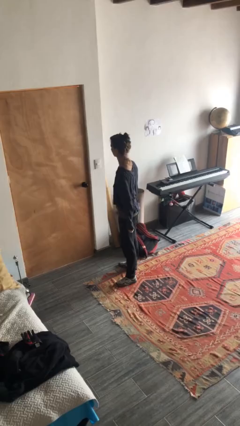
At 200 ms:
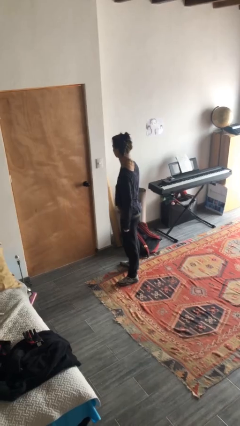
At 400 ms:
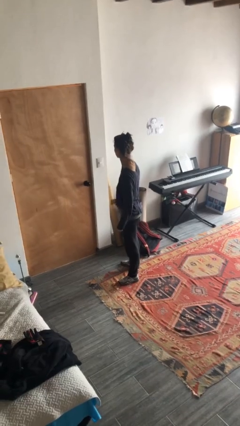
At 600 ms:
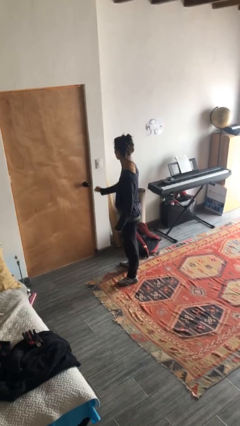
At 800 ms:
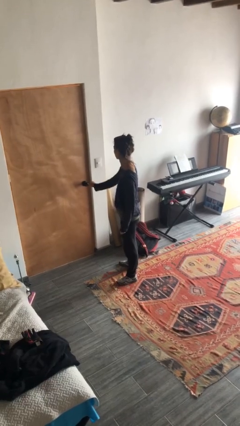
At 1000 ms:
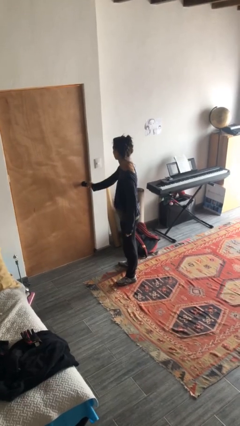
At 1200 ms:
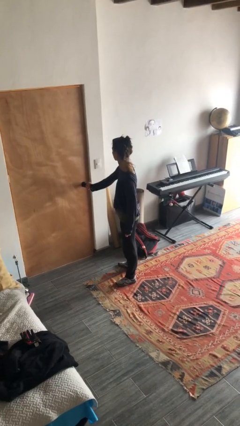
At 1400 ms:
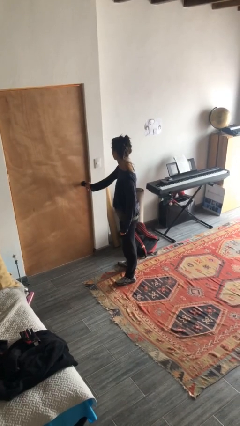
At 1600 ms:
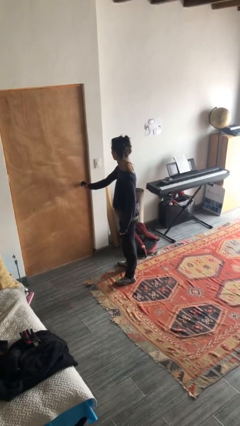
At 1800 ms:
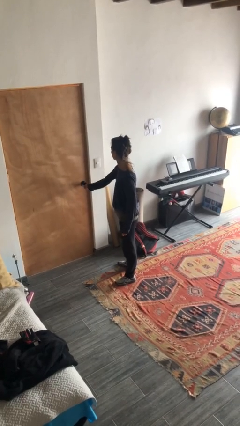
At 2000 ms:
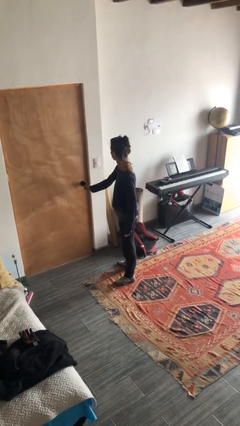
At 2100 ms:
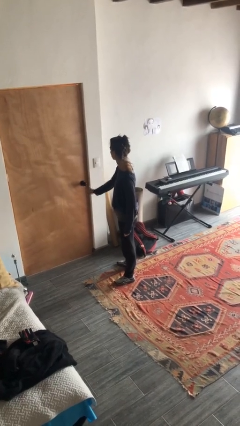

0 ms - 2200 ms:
person locks door with keys

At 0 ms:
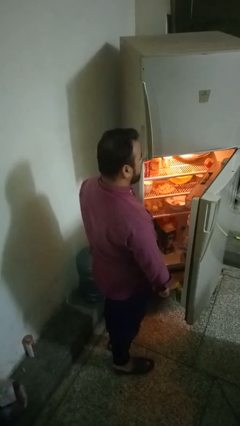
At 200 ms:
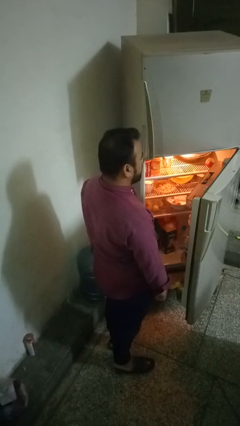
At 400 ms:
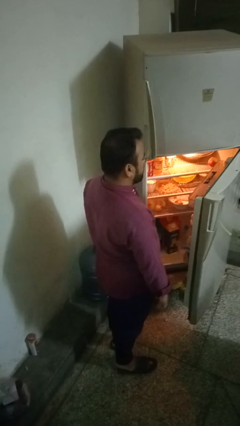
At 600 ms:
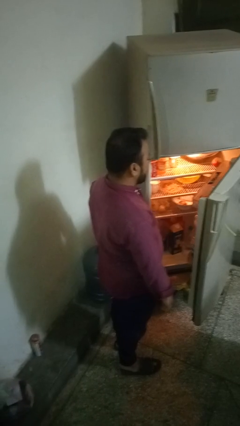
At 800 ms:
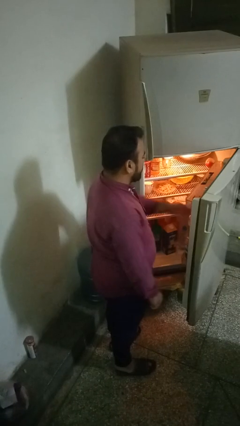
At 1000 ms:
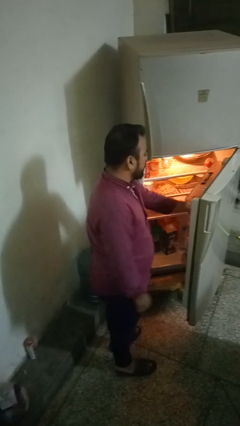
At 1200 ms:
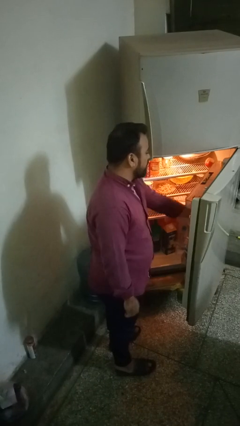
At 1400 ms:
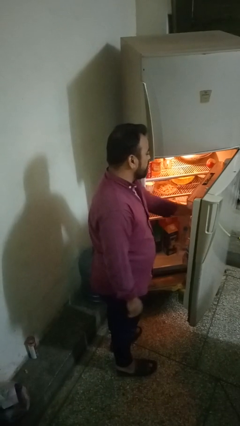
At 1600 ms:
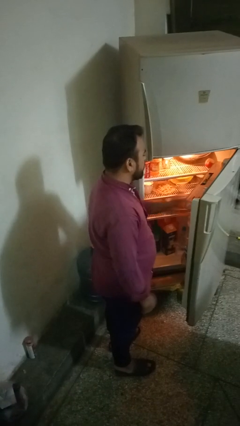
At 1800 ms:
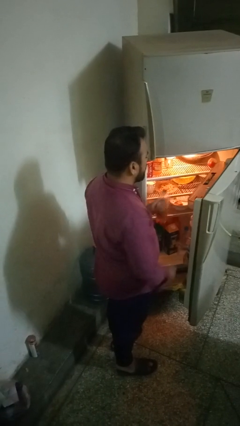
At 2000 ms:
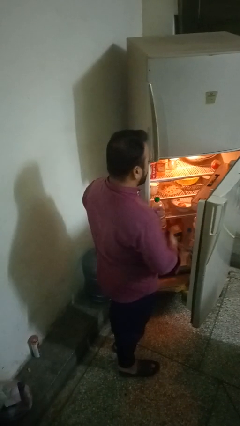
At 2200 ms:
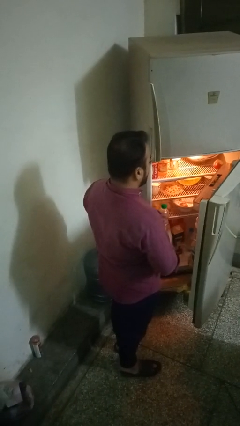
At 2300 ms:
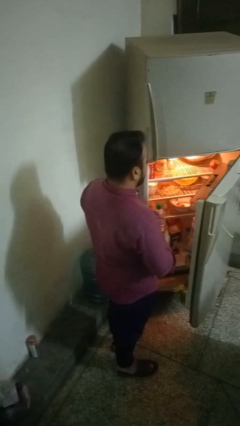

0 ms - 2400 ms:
person takes object from refrigerator

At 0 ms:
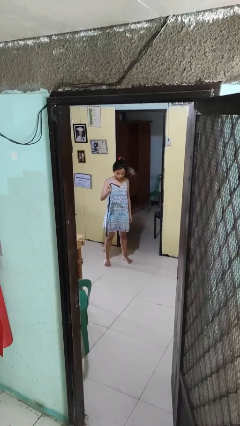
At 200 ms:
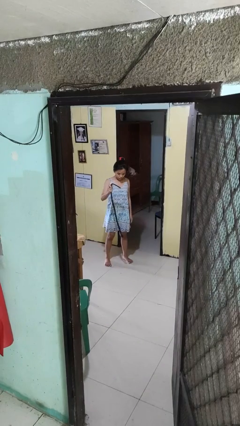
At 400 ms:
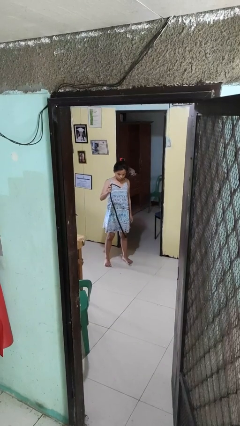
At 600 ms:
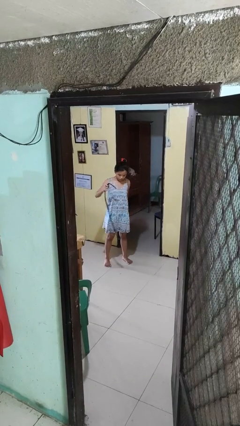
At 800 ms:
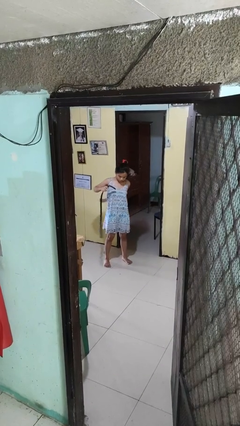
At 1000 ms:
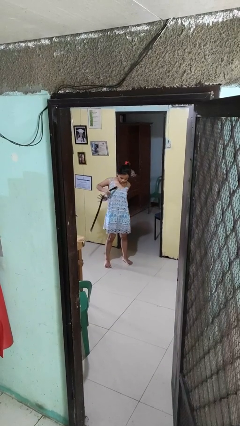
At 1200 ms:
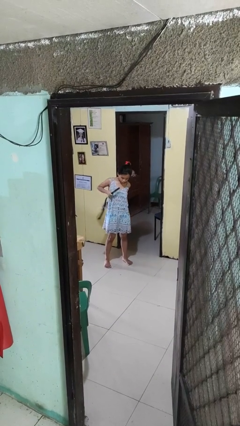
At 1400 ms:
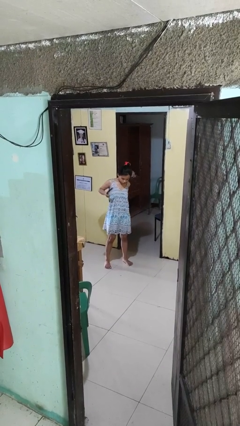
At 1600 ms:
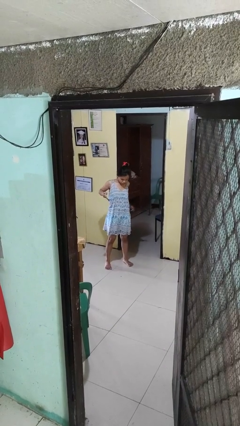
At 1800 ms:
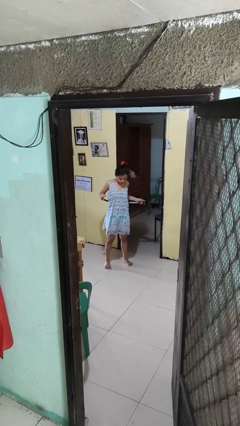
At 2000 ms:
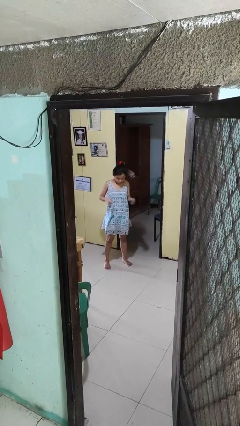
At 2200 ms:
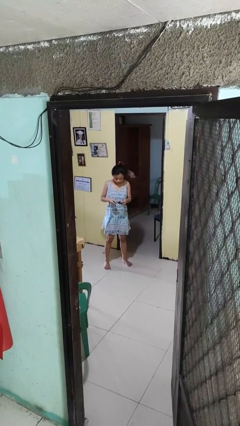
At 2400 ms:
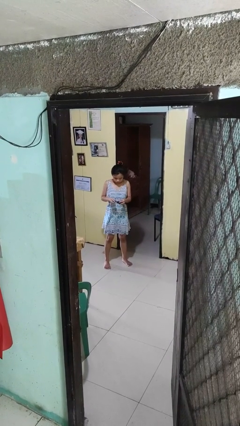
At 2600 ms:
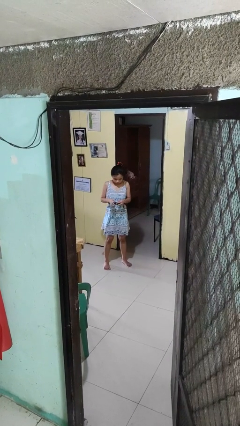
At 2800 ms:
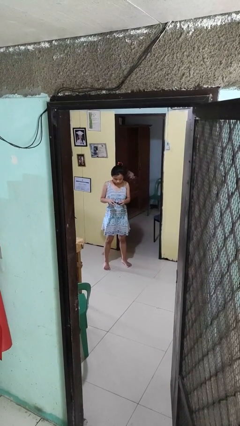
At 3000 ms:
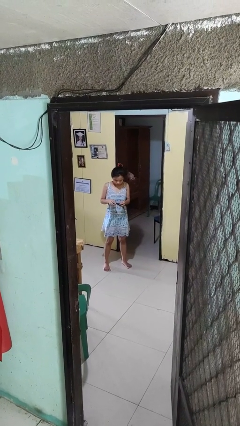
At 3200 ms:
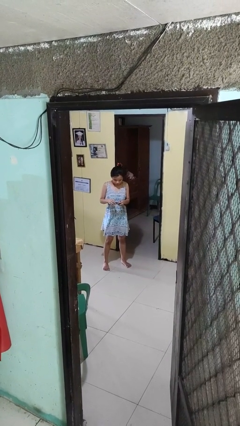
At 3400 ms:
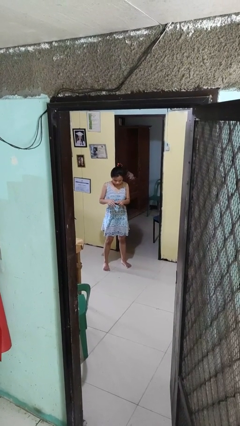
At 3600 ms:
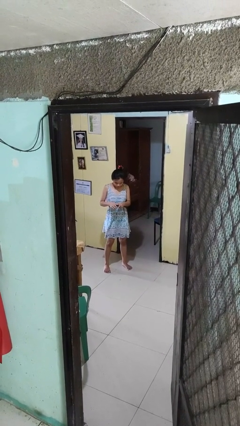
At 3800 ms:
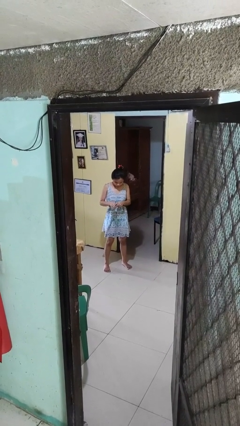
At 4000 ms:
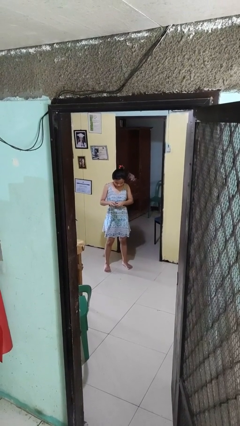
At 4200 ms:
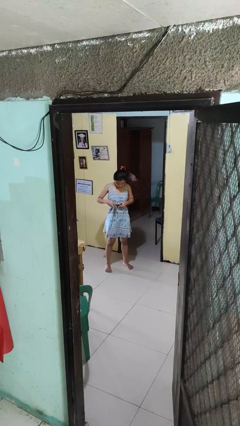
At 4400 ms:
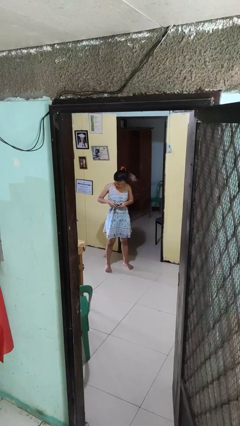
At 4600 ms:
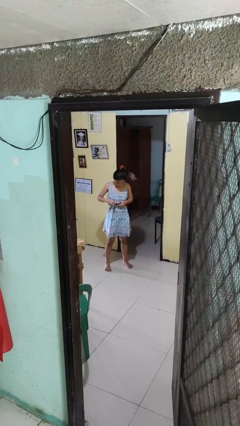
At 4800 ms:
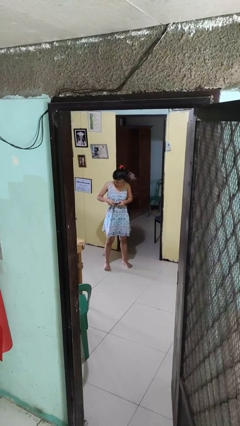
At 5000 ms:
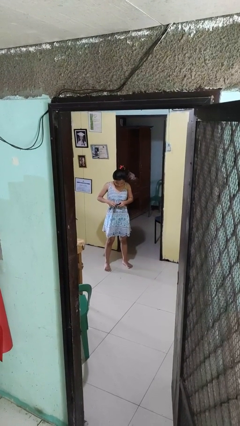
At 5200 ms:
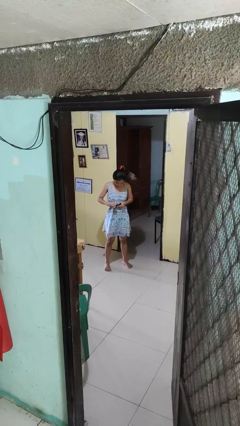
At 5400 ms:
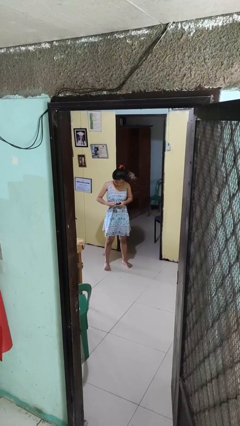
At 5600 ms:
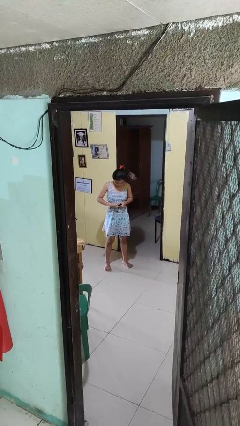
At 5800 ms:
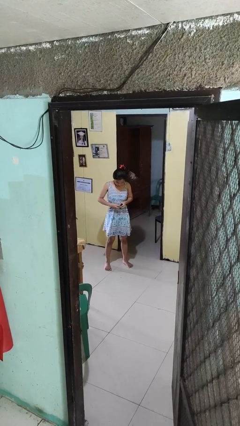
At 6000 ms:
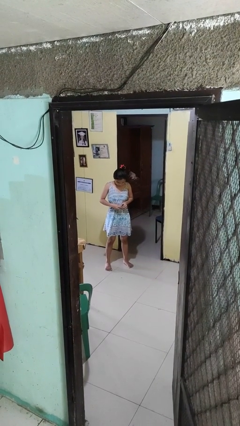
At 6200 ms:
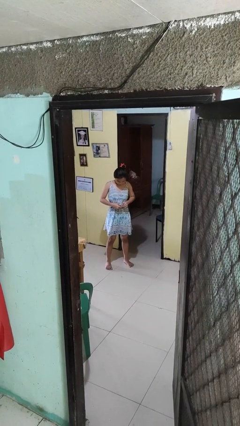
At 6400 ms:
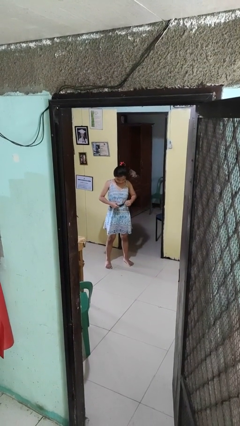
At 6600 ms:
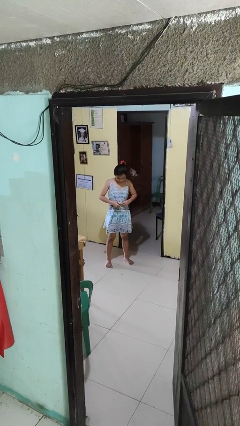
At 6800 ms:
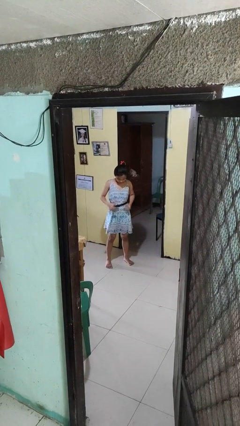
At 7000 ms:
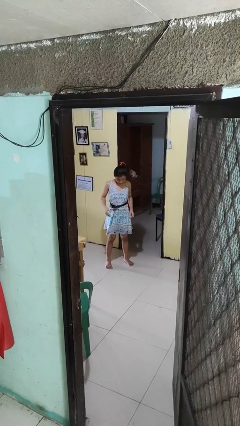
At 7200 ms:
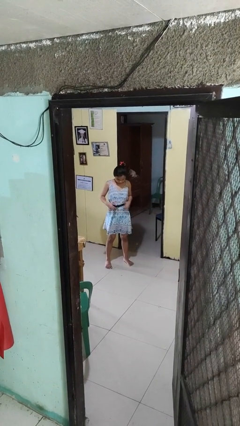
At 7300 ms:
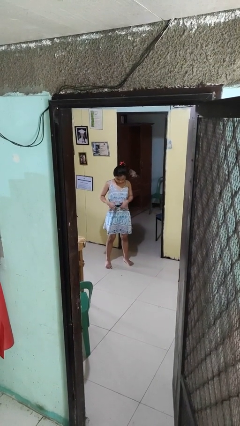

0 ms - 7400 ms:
person puts on belt

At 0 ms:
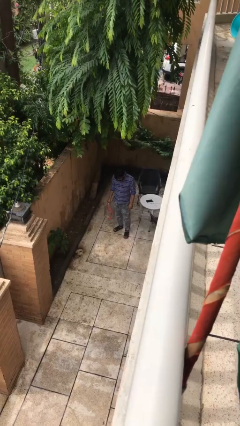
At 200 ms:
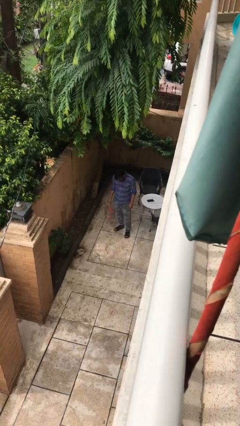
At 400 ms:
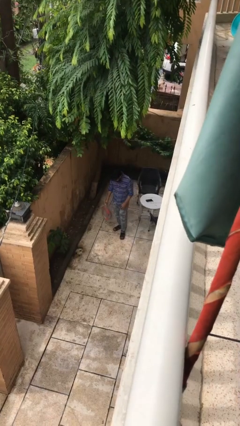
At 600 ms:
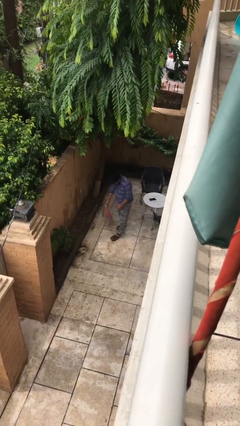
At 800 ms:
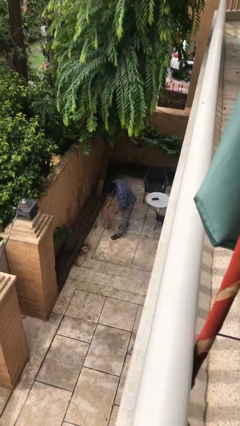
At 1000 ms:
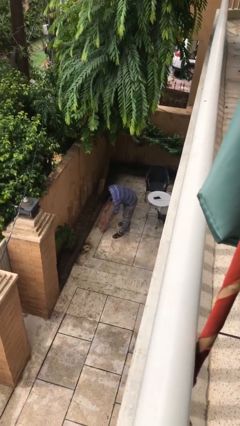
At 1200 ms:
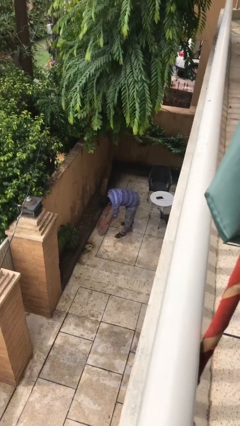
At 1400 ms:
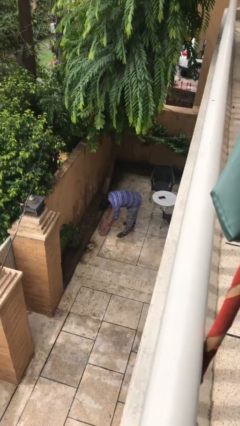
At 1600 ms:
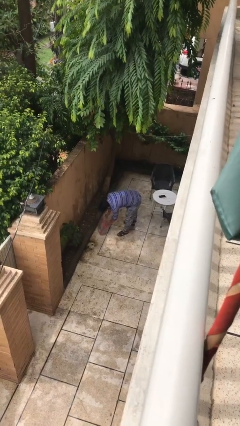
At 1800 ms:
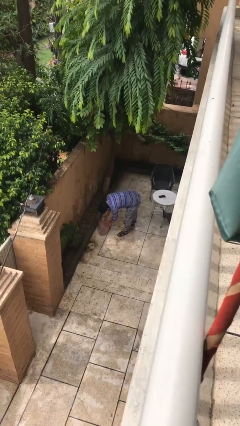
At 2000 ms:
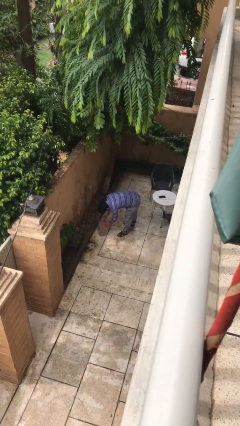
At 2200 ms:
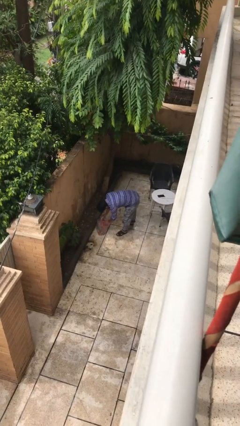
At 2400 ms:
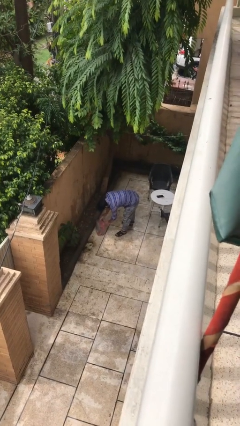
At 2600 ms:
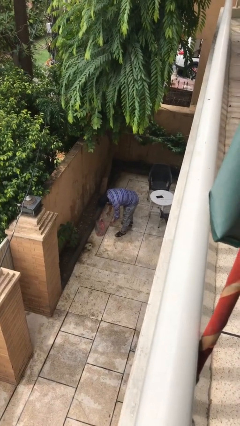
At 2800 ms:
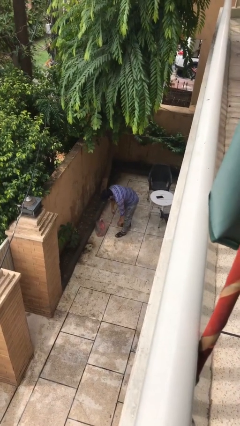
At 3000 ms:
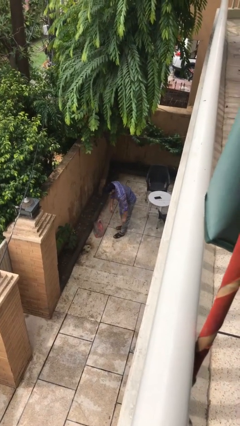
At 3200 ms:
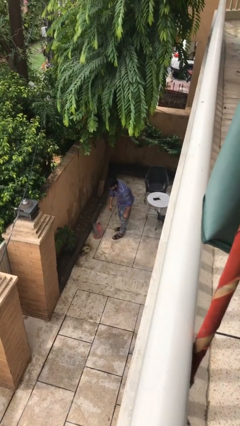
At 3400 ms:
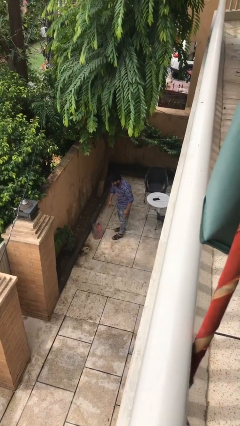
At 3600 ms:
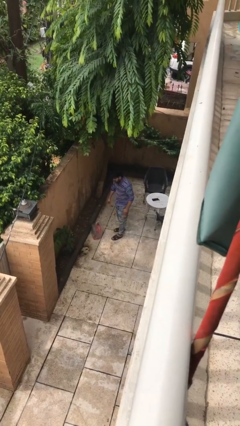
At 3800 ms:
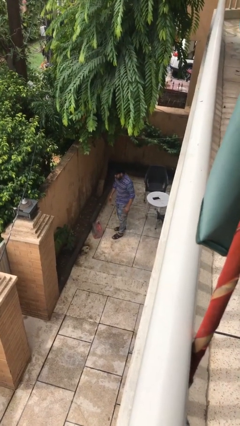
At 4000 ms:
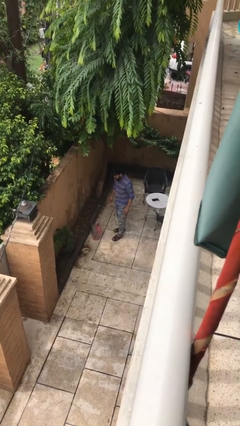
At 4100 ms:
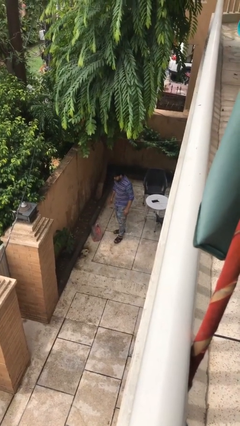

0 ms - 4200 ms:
person puts down object on floor

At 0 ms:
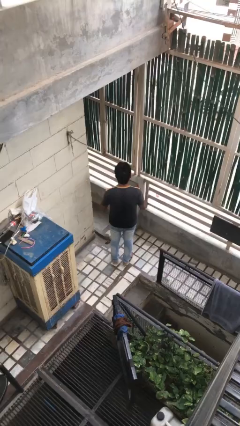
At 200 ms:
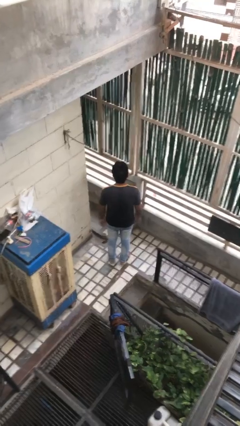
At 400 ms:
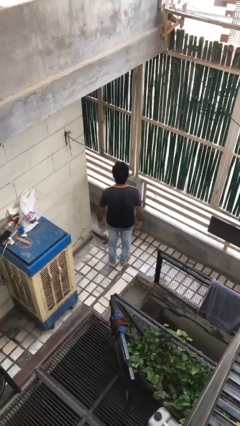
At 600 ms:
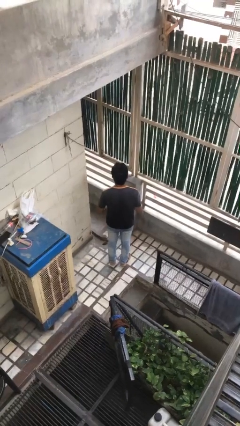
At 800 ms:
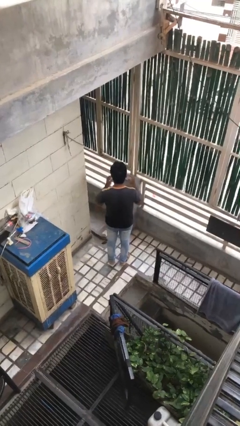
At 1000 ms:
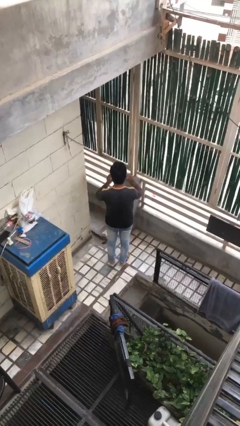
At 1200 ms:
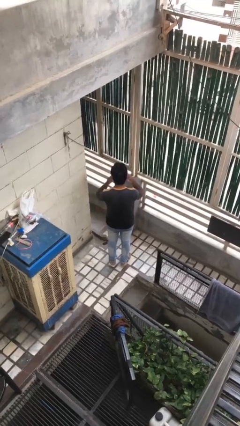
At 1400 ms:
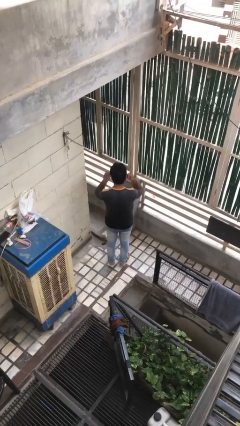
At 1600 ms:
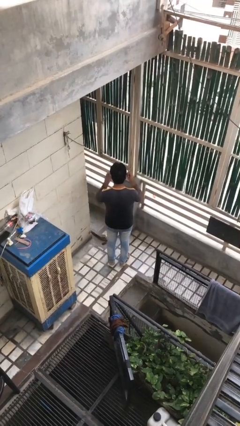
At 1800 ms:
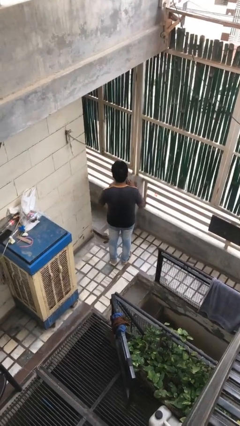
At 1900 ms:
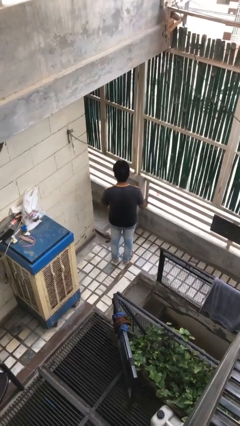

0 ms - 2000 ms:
person takes off facemask
